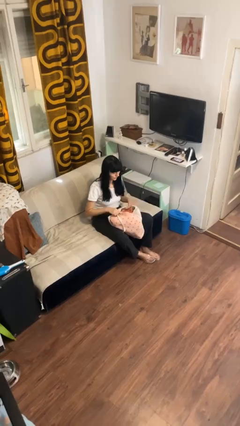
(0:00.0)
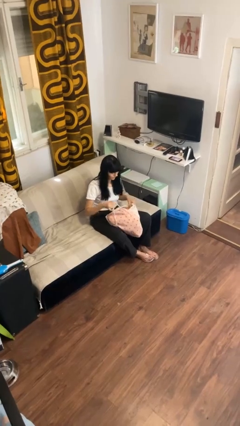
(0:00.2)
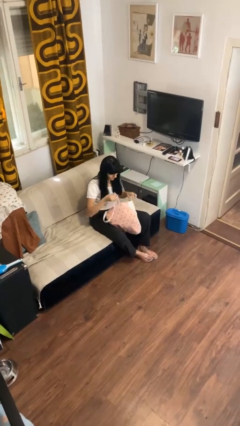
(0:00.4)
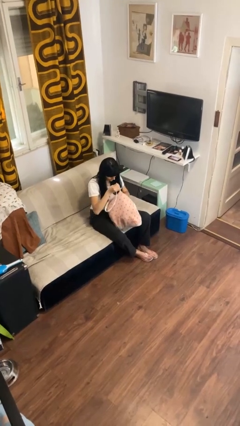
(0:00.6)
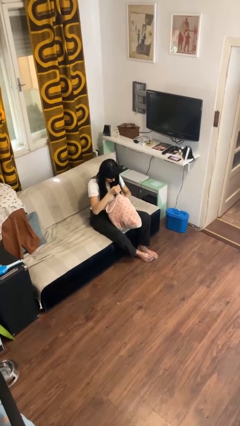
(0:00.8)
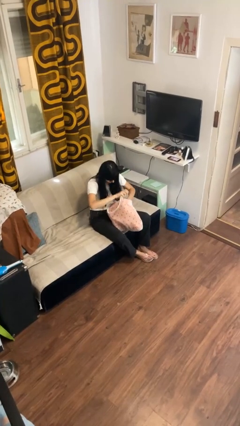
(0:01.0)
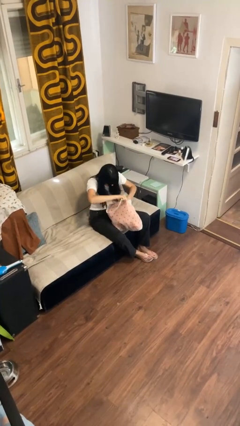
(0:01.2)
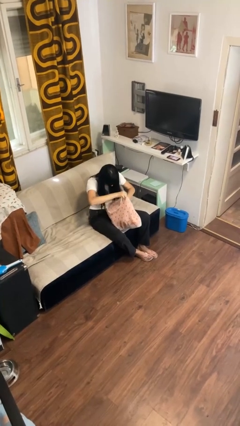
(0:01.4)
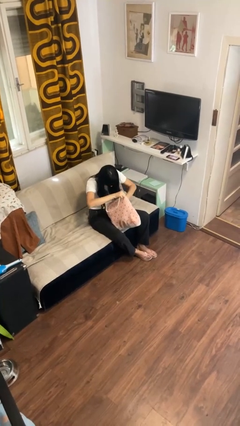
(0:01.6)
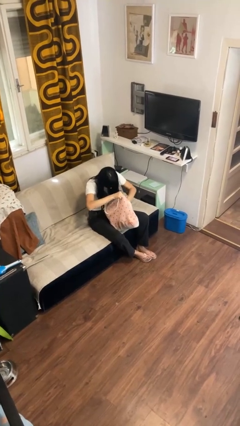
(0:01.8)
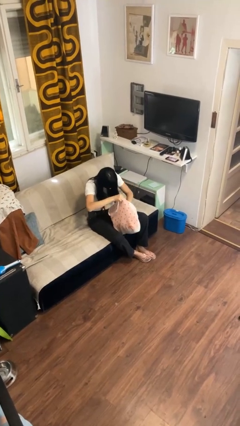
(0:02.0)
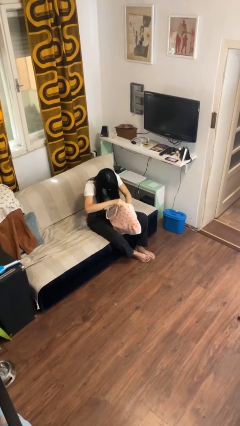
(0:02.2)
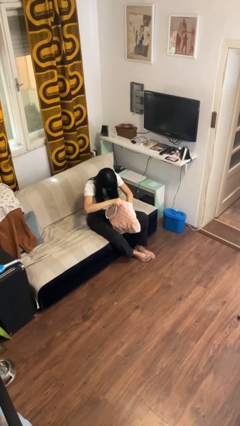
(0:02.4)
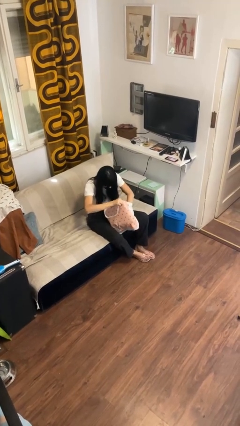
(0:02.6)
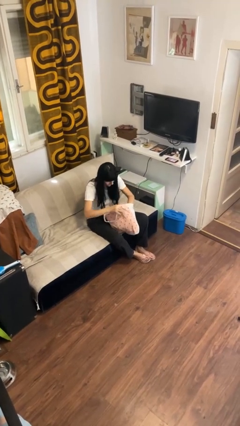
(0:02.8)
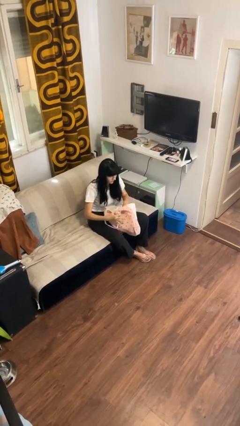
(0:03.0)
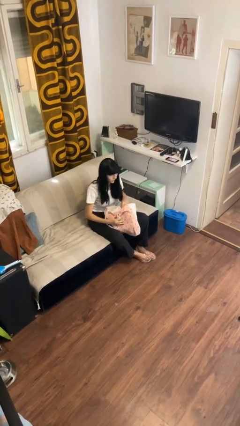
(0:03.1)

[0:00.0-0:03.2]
person searches in bag

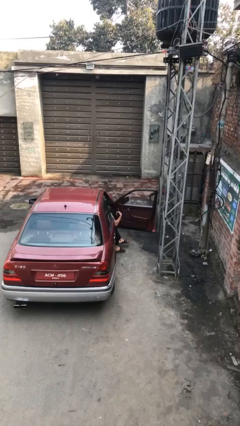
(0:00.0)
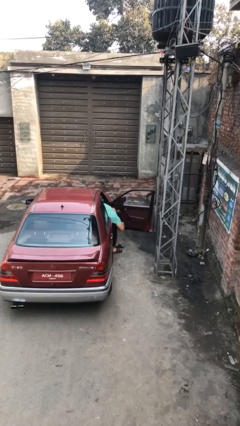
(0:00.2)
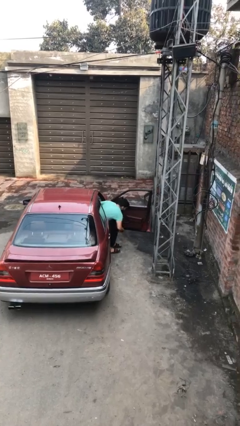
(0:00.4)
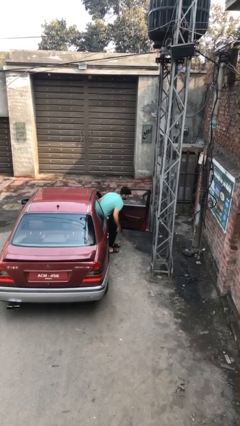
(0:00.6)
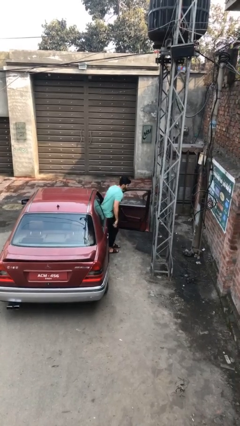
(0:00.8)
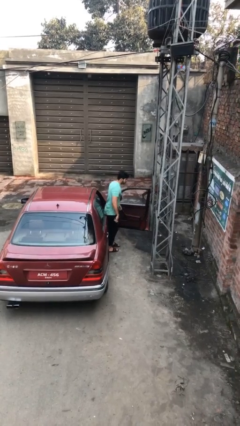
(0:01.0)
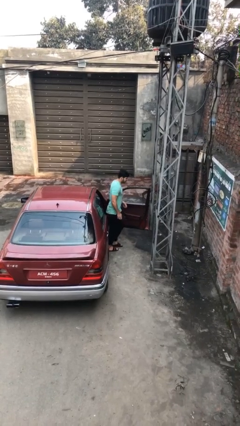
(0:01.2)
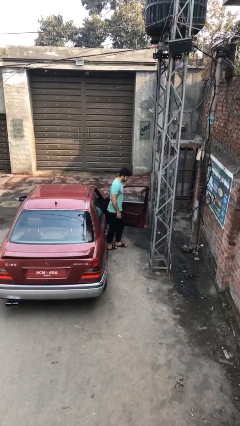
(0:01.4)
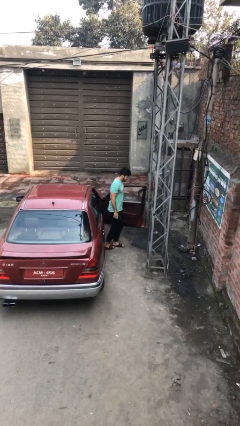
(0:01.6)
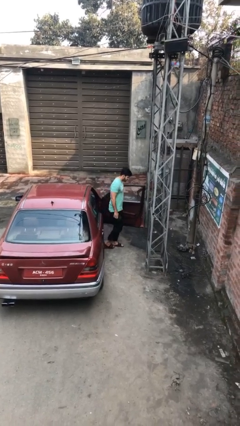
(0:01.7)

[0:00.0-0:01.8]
person exits car

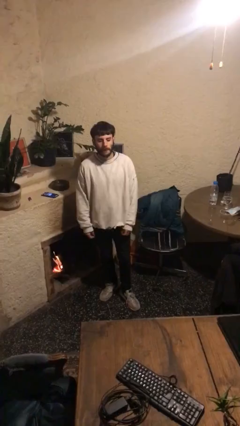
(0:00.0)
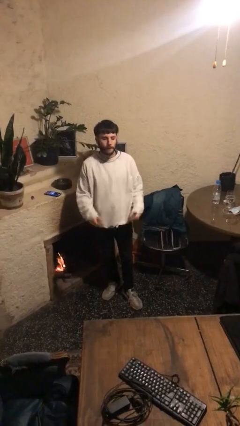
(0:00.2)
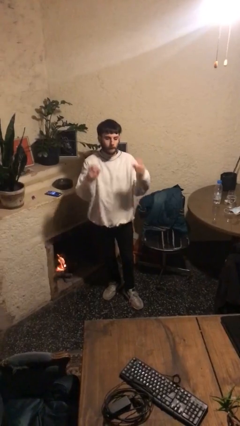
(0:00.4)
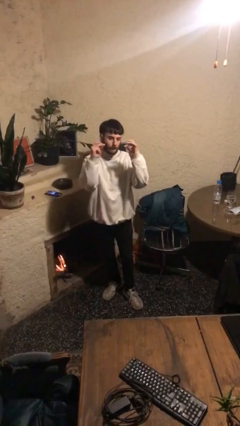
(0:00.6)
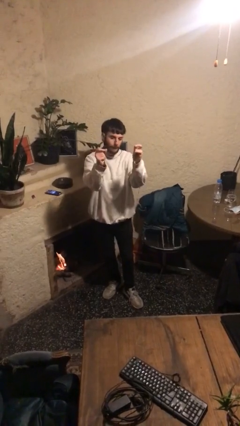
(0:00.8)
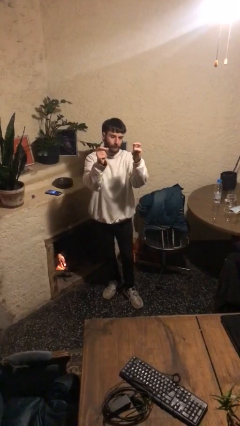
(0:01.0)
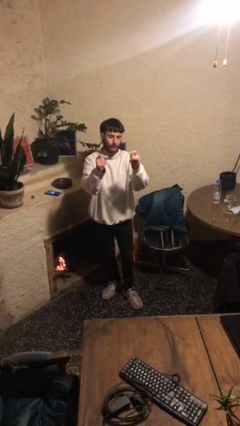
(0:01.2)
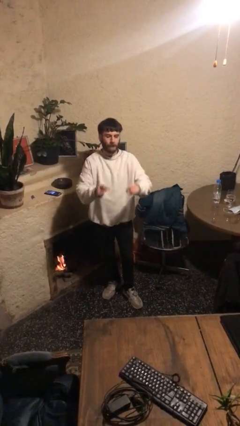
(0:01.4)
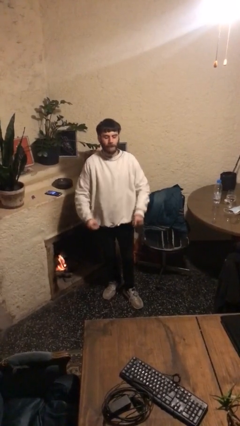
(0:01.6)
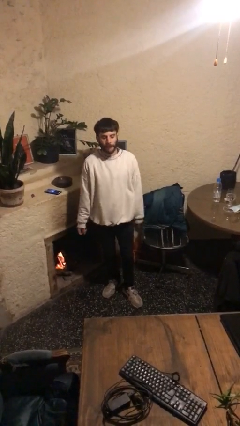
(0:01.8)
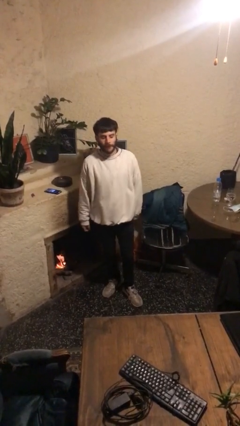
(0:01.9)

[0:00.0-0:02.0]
person snaps fingers

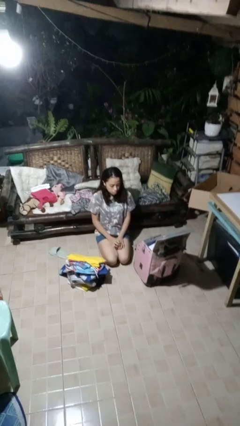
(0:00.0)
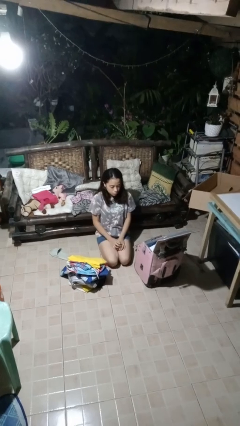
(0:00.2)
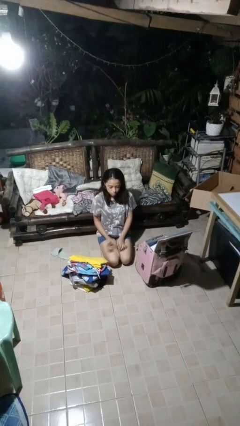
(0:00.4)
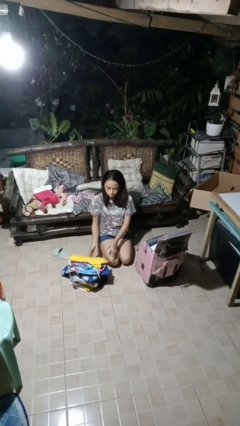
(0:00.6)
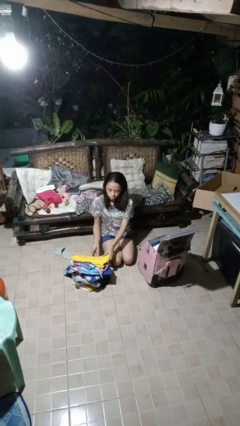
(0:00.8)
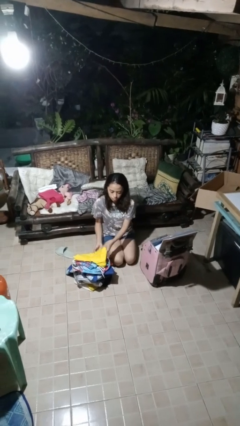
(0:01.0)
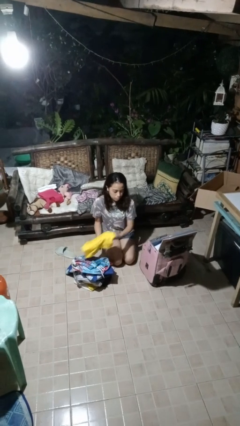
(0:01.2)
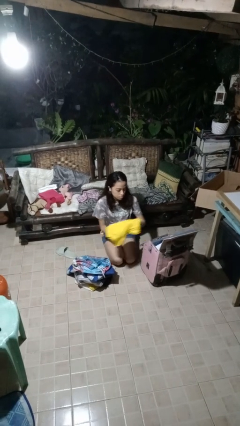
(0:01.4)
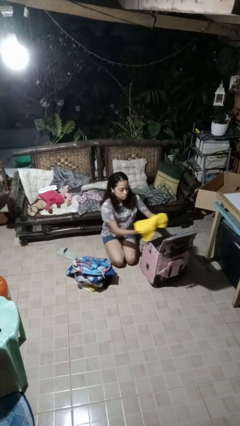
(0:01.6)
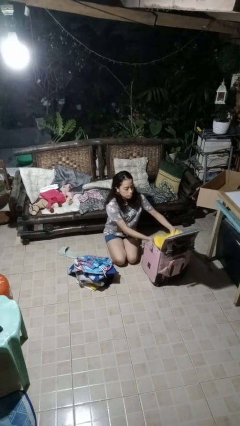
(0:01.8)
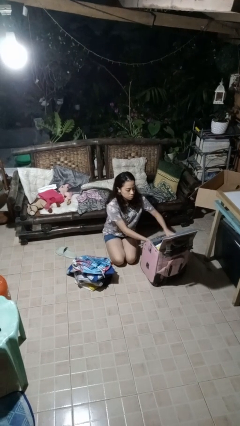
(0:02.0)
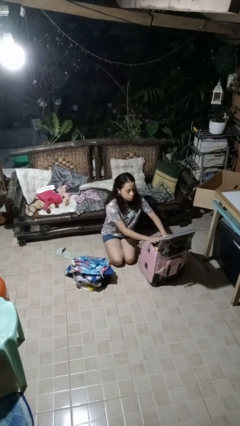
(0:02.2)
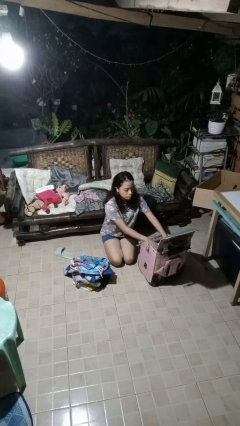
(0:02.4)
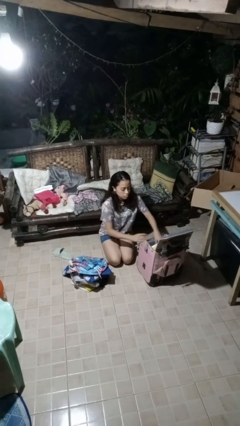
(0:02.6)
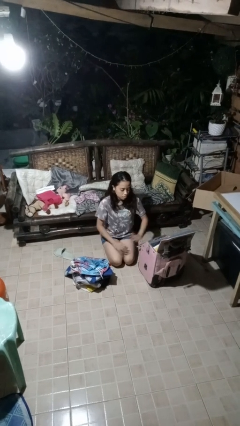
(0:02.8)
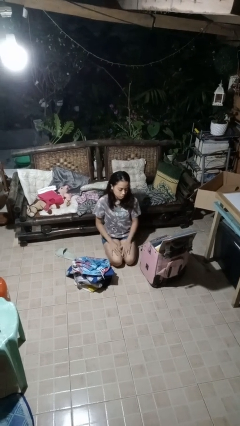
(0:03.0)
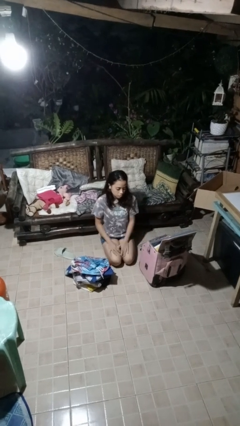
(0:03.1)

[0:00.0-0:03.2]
person loads clothes into suitcase

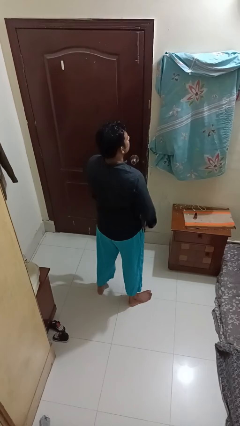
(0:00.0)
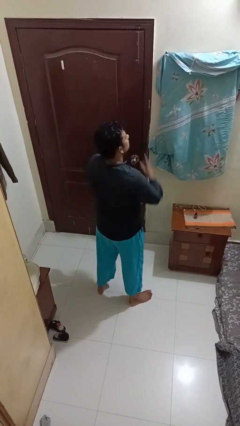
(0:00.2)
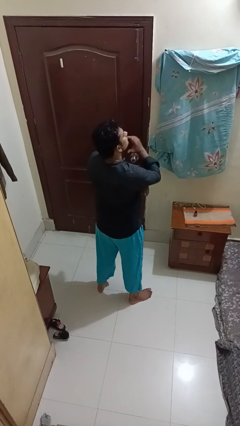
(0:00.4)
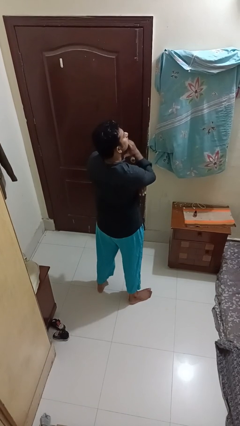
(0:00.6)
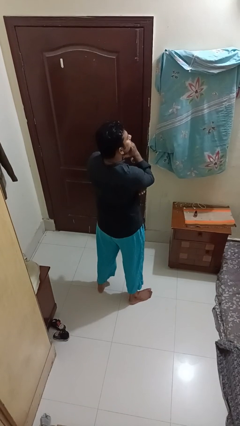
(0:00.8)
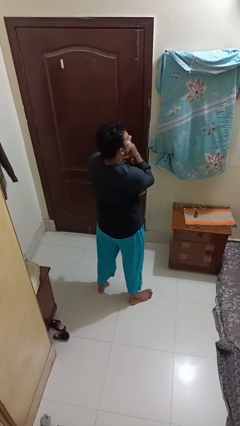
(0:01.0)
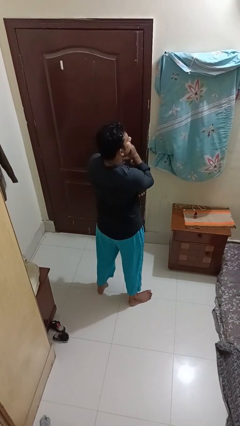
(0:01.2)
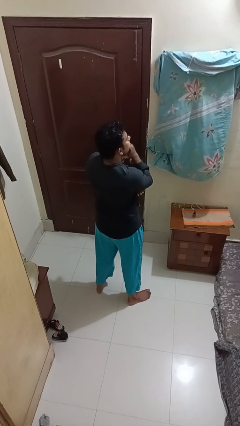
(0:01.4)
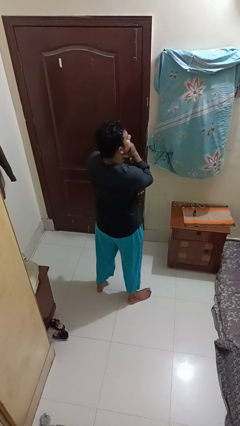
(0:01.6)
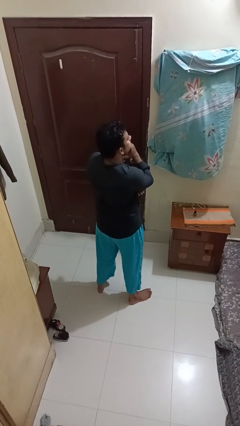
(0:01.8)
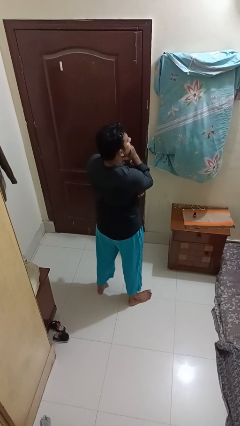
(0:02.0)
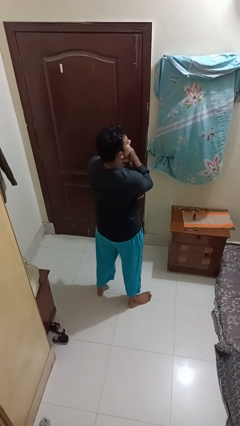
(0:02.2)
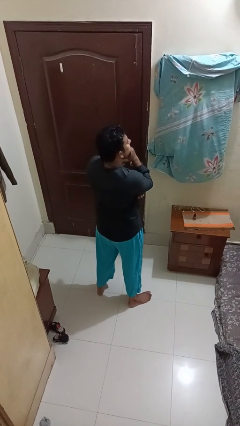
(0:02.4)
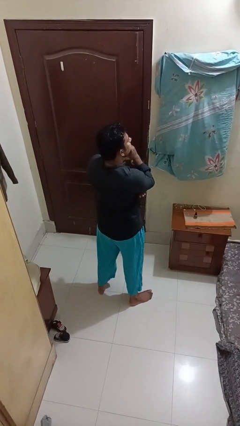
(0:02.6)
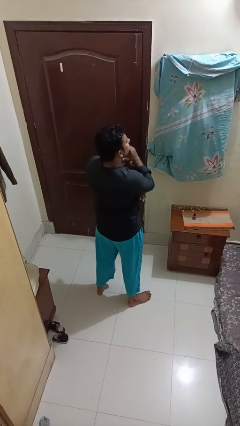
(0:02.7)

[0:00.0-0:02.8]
person strokes chin

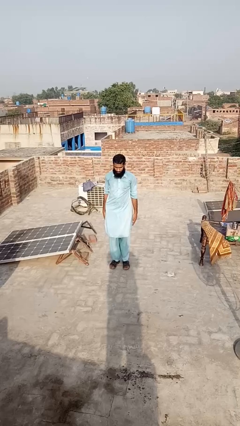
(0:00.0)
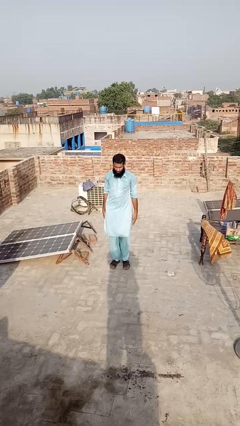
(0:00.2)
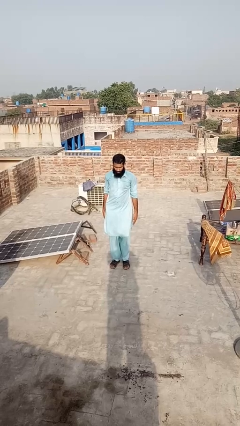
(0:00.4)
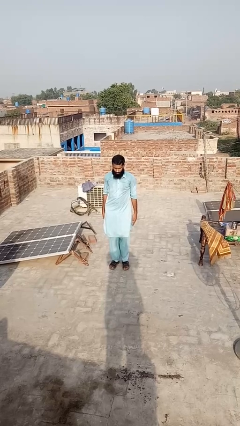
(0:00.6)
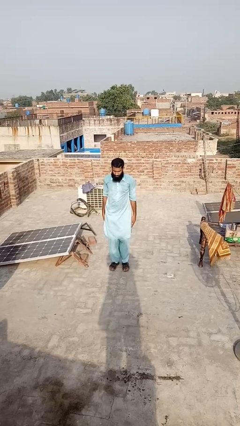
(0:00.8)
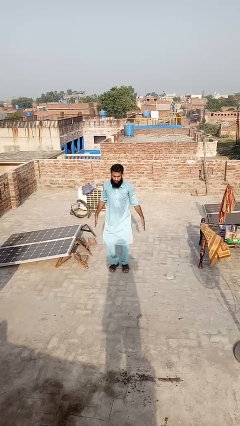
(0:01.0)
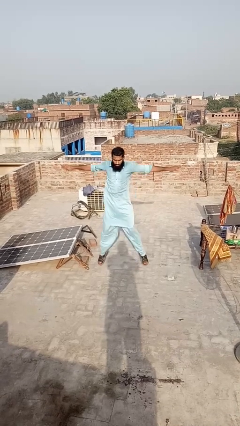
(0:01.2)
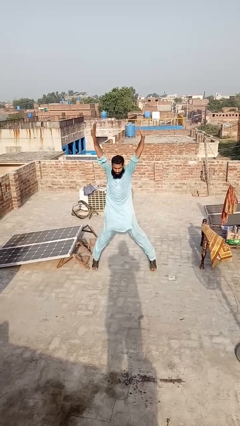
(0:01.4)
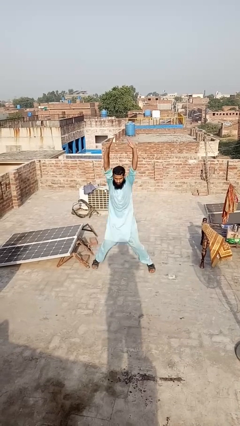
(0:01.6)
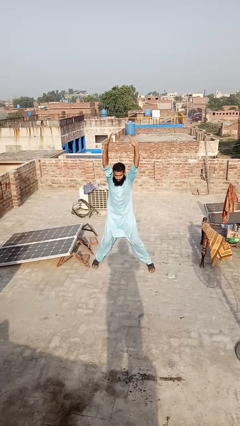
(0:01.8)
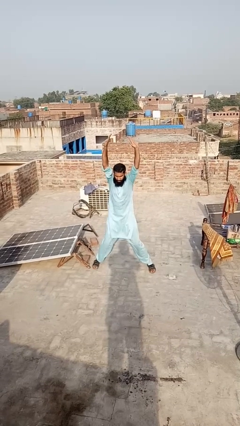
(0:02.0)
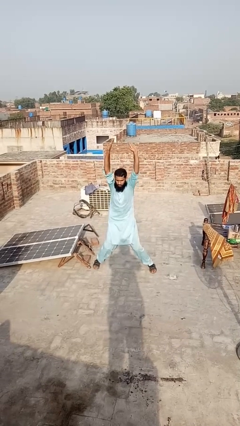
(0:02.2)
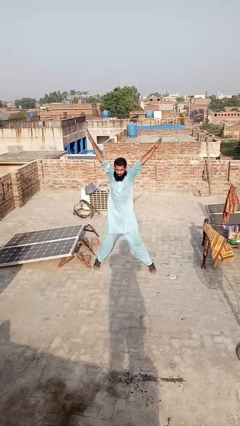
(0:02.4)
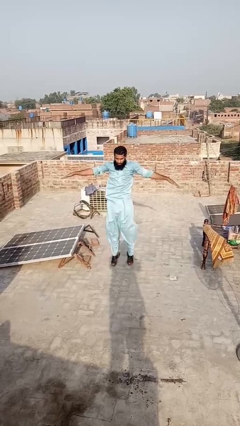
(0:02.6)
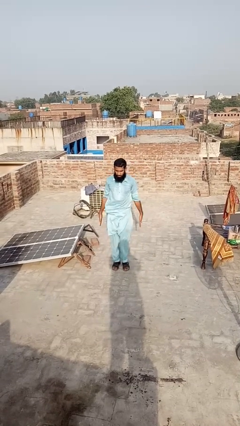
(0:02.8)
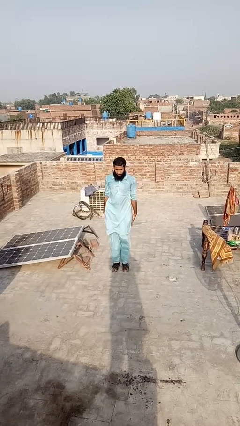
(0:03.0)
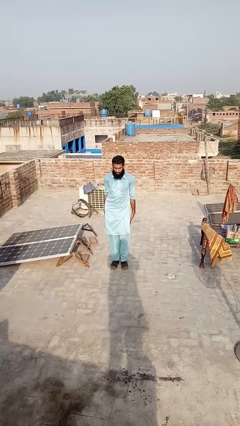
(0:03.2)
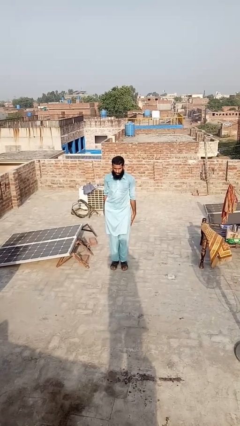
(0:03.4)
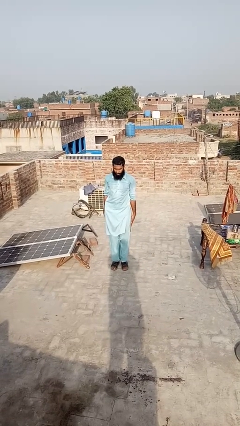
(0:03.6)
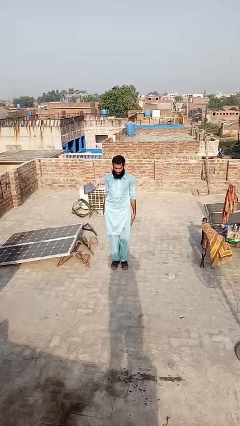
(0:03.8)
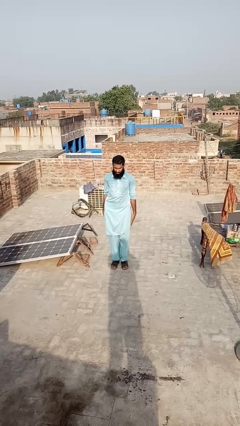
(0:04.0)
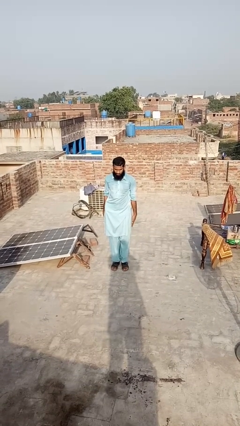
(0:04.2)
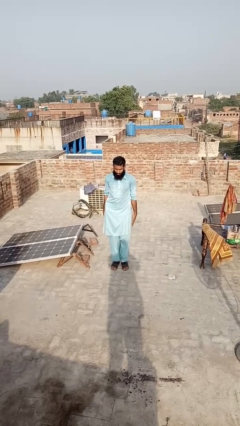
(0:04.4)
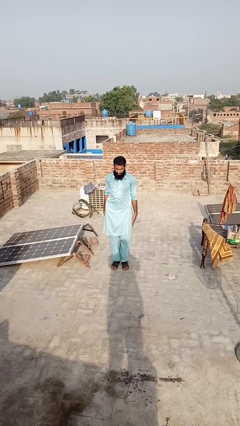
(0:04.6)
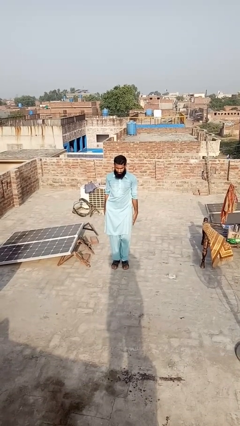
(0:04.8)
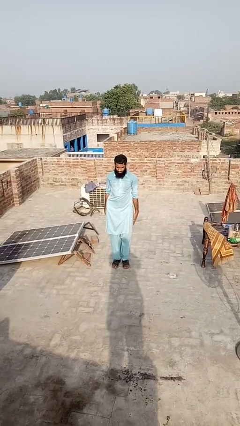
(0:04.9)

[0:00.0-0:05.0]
person exercises with jumping jacks
